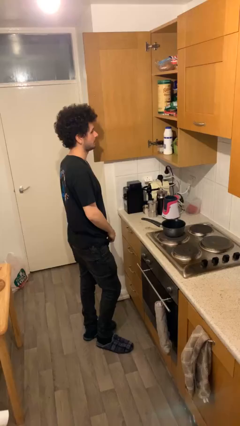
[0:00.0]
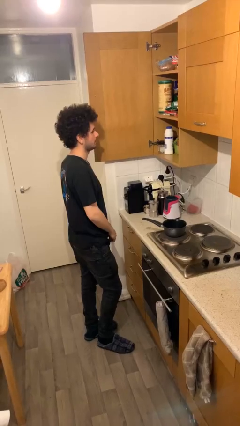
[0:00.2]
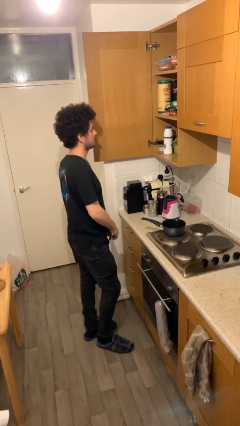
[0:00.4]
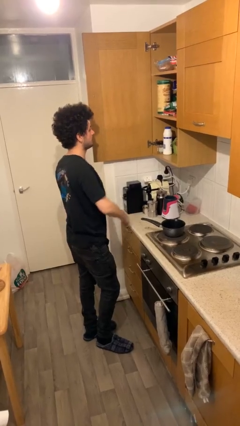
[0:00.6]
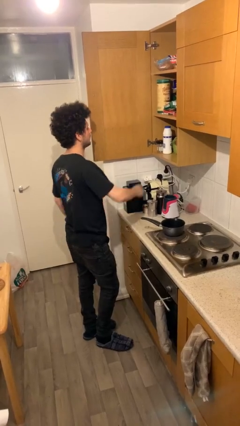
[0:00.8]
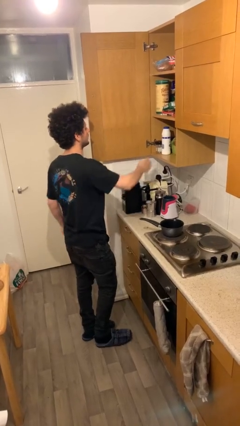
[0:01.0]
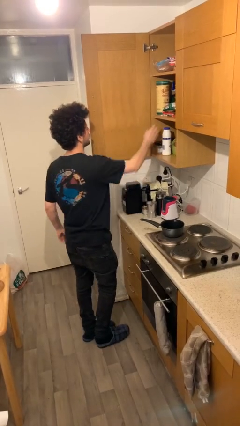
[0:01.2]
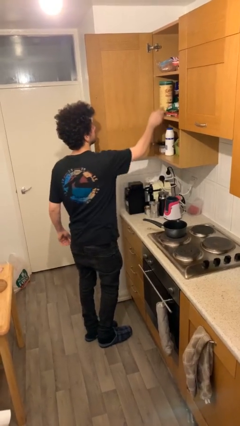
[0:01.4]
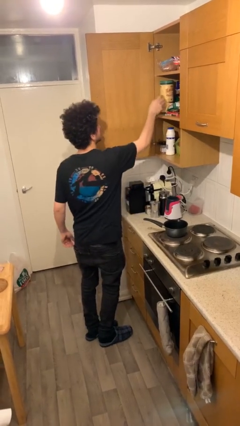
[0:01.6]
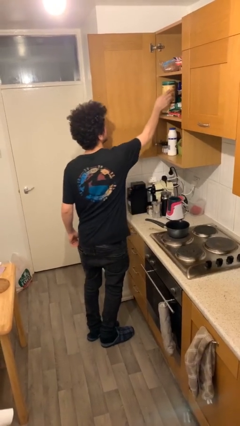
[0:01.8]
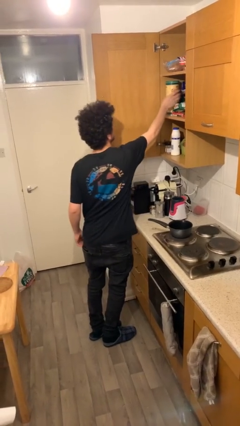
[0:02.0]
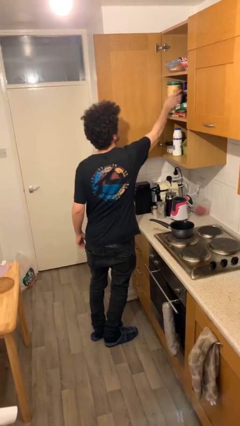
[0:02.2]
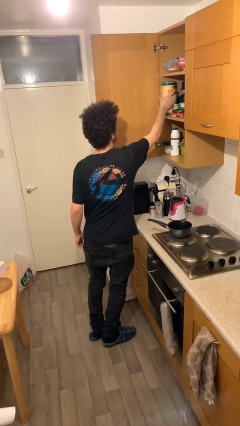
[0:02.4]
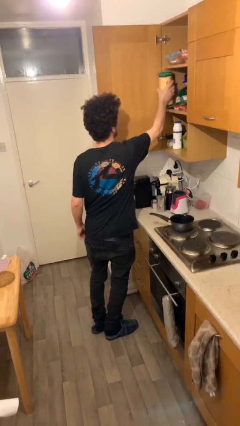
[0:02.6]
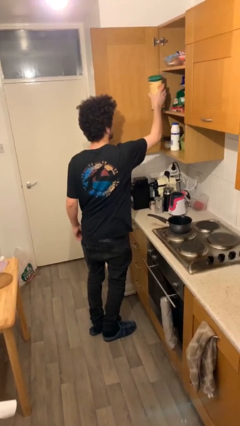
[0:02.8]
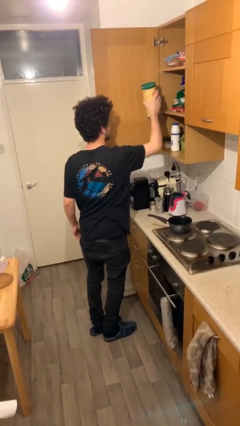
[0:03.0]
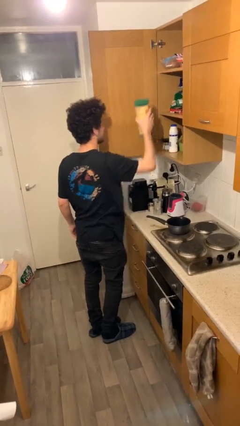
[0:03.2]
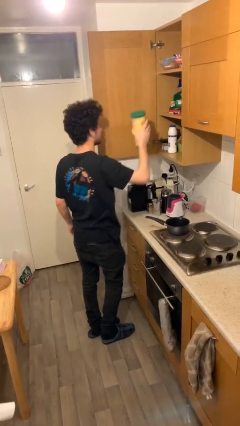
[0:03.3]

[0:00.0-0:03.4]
person picks up object from shelf

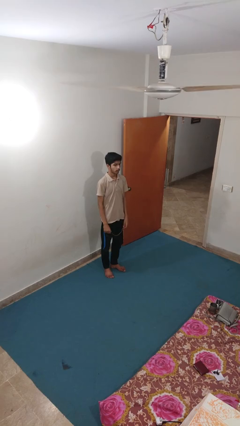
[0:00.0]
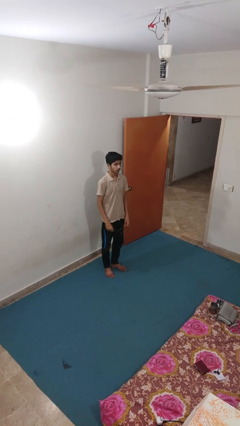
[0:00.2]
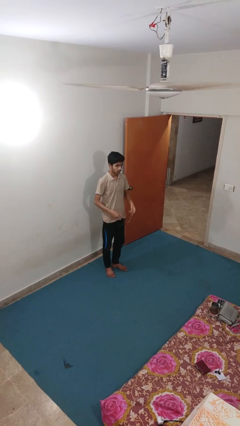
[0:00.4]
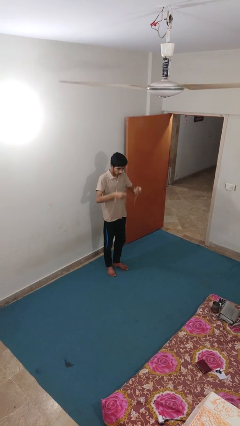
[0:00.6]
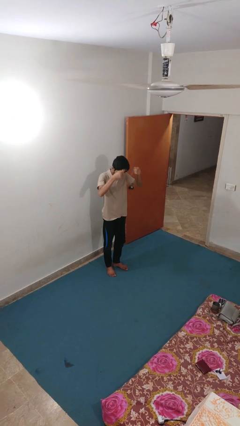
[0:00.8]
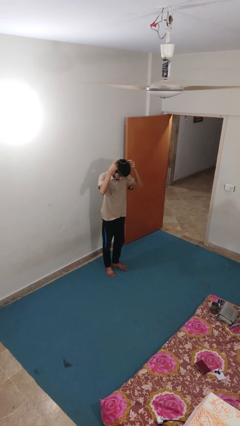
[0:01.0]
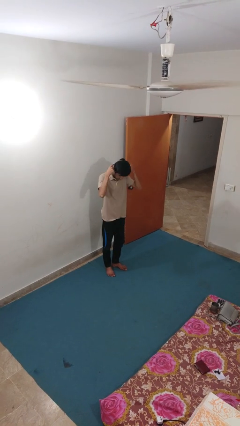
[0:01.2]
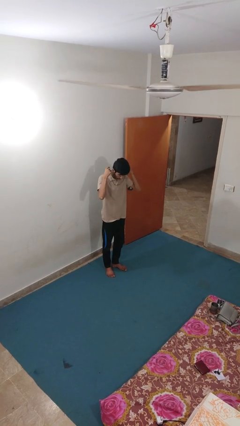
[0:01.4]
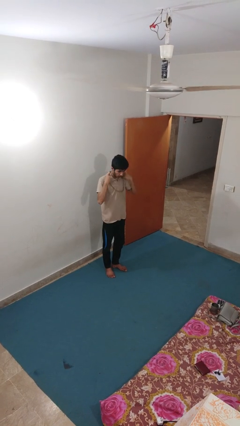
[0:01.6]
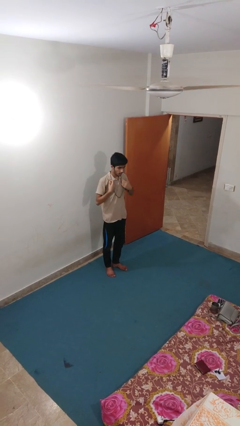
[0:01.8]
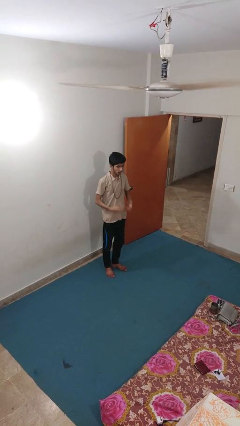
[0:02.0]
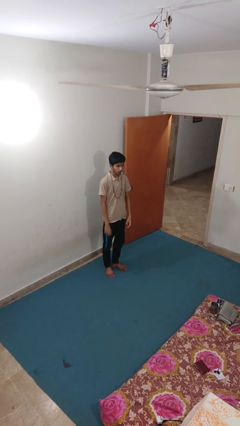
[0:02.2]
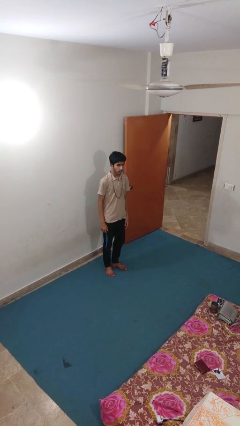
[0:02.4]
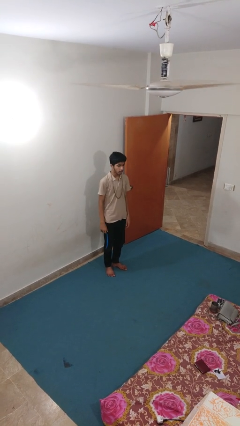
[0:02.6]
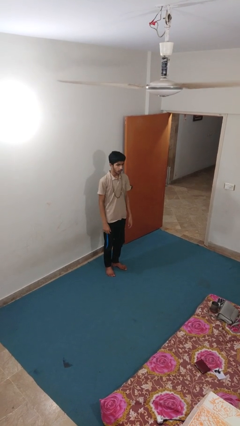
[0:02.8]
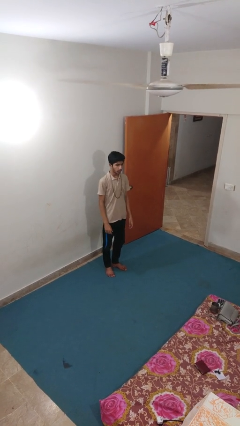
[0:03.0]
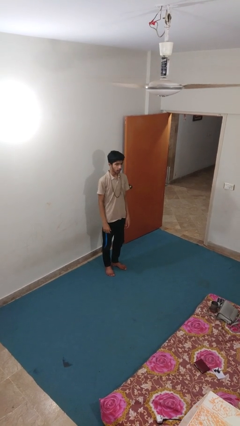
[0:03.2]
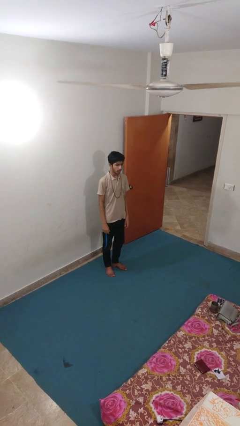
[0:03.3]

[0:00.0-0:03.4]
person puts on necklace

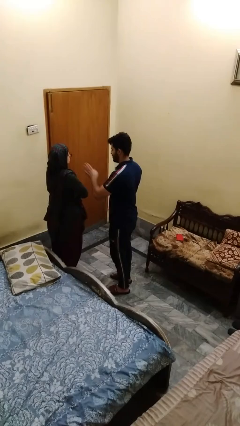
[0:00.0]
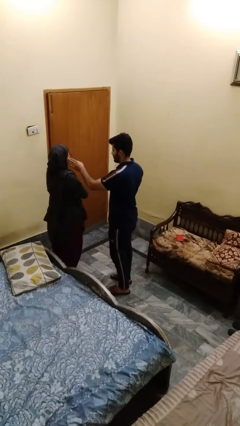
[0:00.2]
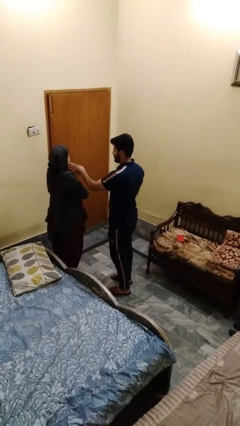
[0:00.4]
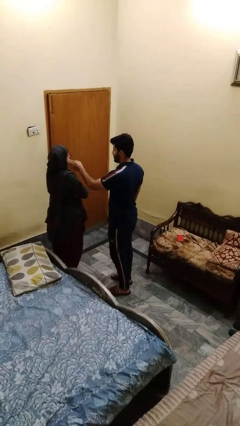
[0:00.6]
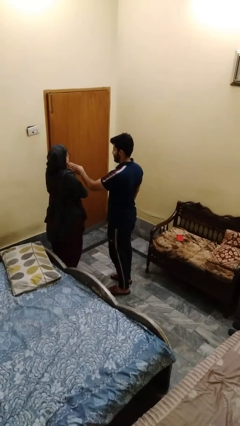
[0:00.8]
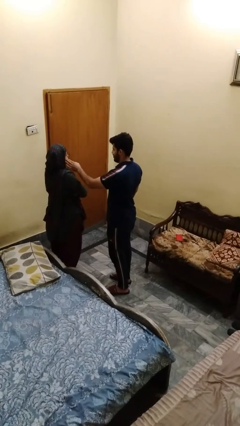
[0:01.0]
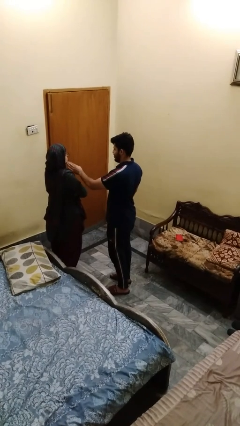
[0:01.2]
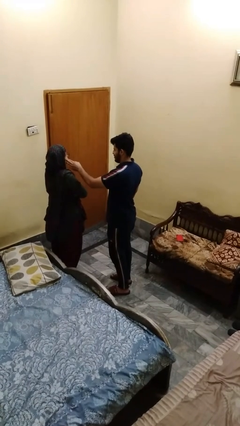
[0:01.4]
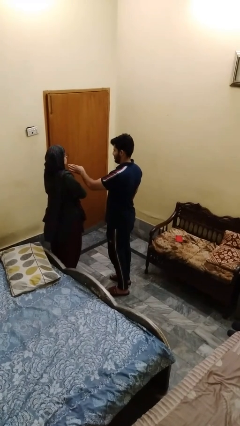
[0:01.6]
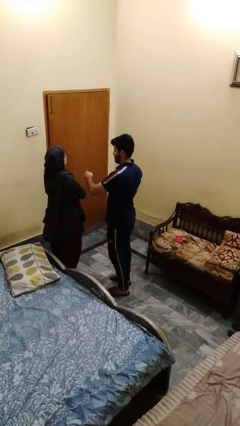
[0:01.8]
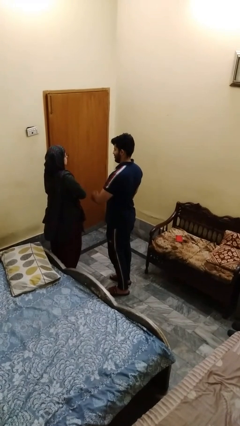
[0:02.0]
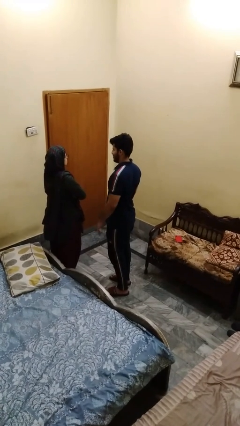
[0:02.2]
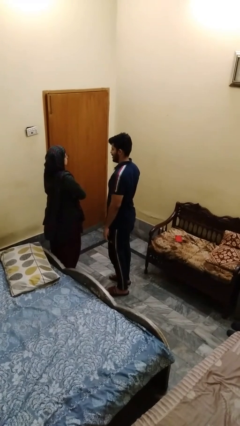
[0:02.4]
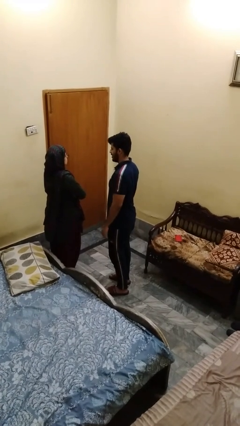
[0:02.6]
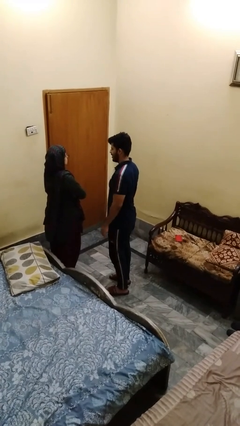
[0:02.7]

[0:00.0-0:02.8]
person touches face of person

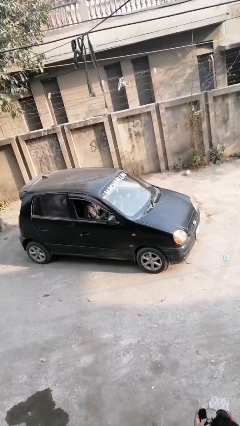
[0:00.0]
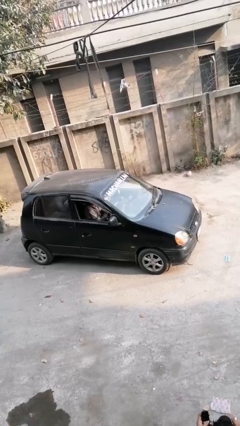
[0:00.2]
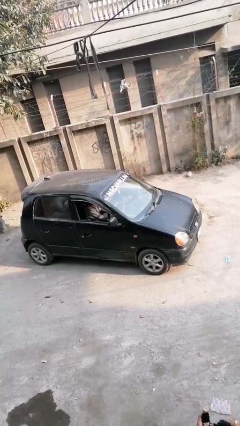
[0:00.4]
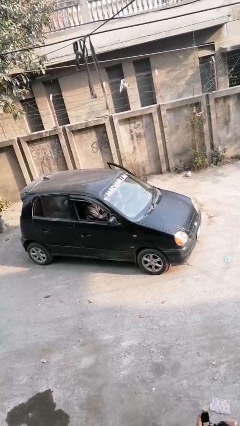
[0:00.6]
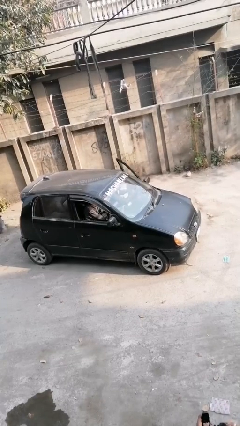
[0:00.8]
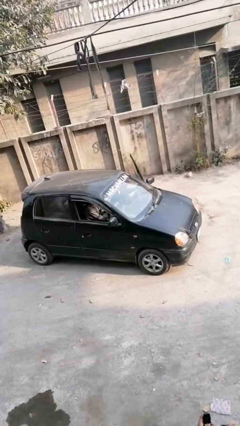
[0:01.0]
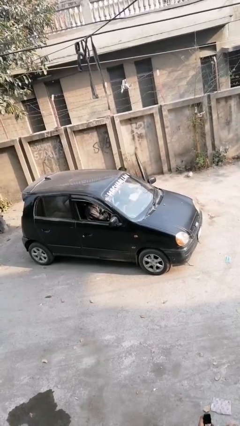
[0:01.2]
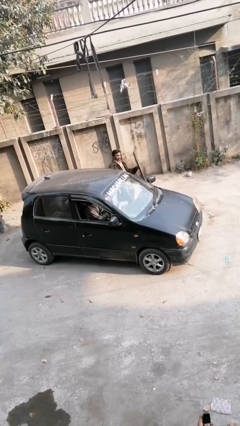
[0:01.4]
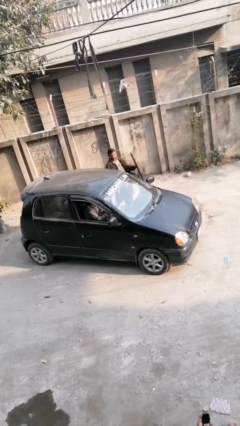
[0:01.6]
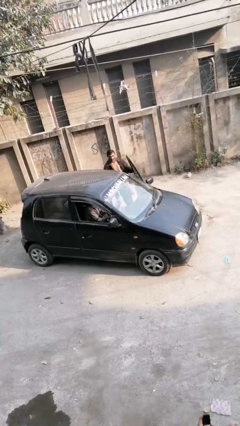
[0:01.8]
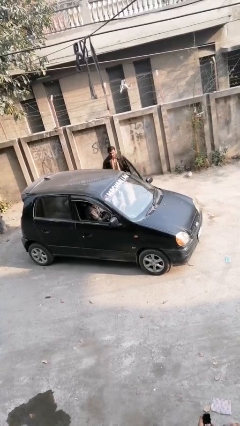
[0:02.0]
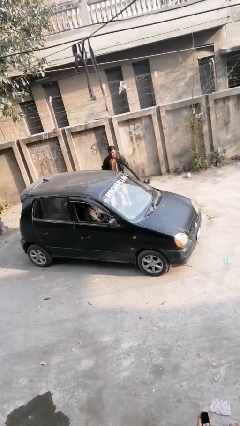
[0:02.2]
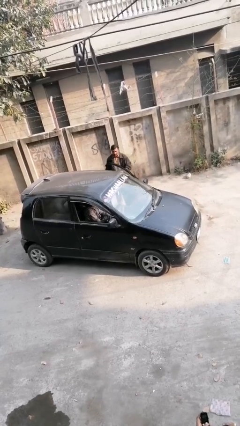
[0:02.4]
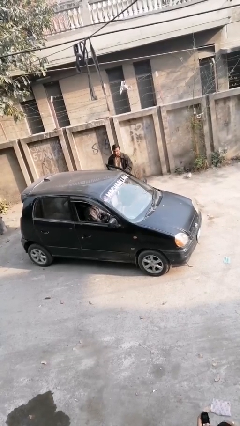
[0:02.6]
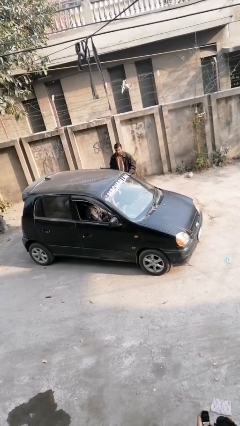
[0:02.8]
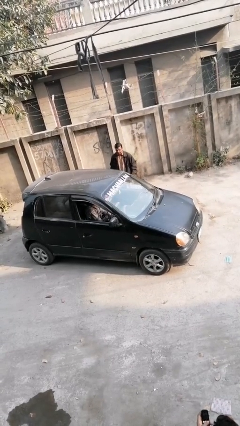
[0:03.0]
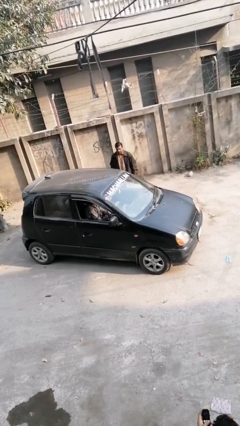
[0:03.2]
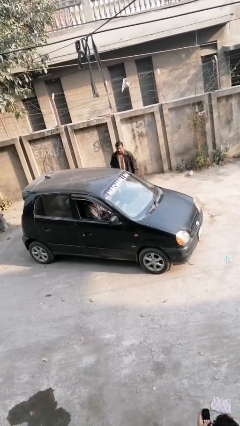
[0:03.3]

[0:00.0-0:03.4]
car drops off person

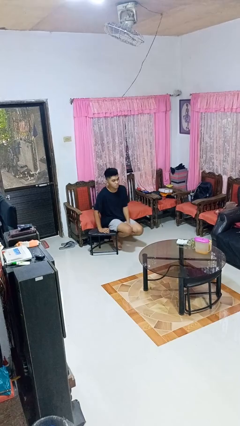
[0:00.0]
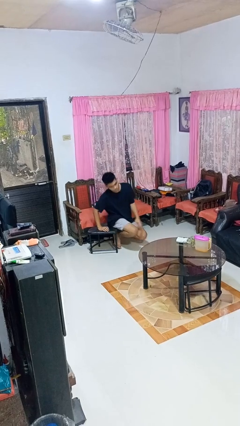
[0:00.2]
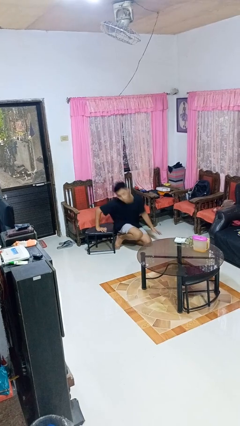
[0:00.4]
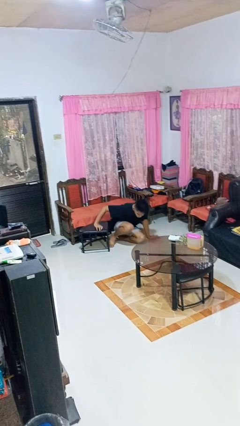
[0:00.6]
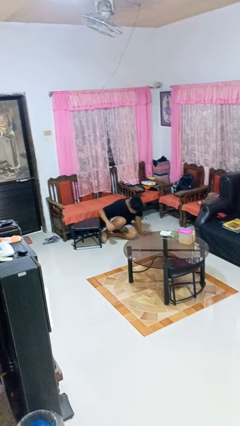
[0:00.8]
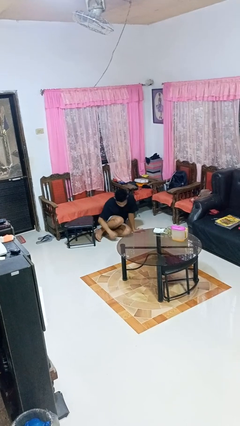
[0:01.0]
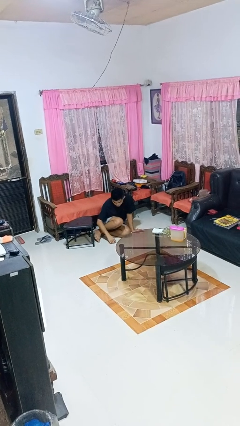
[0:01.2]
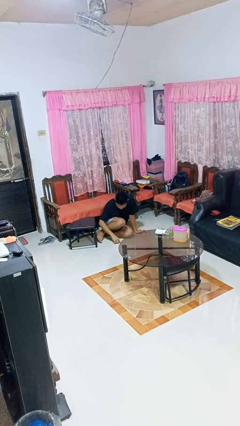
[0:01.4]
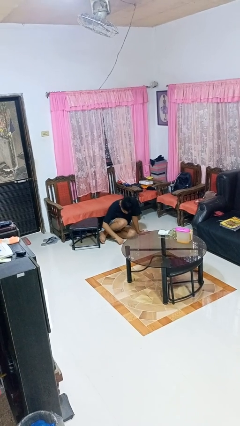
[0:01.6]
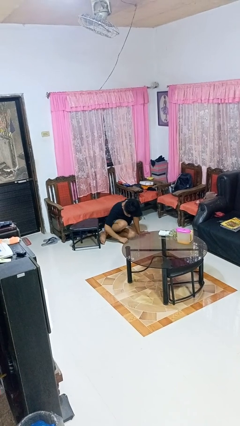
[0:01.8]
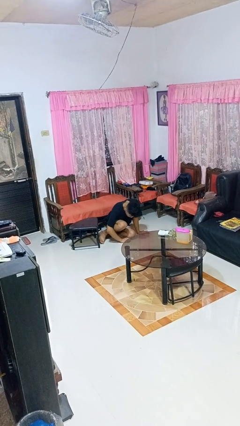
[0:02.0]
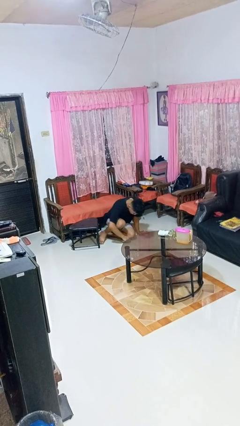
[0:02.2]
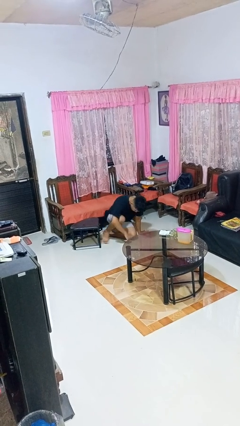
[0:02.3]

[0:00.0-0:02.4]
person falls from chair

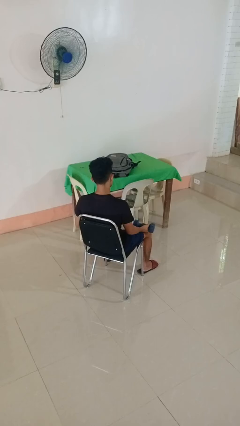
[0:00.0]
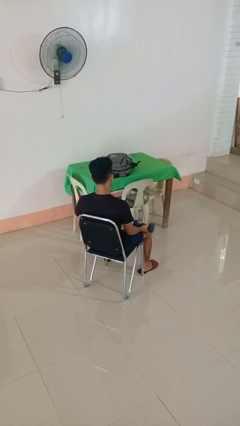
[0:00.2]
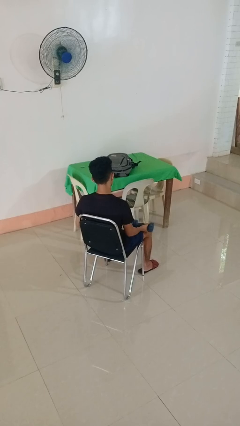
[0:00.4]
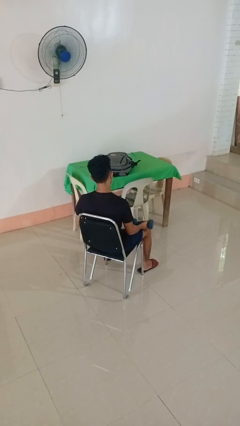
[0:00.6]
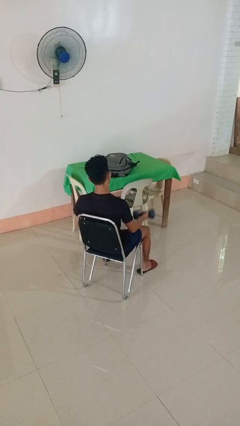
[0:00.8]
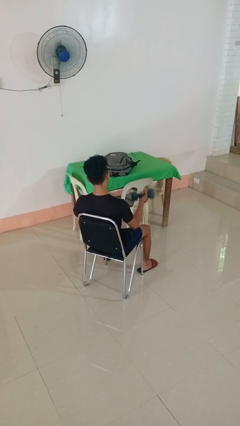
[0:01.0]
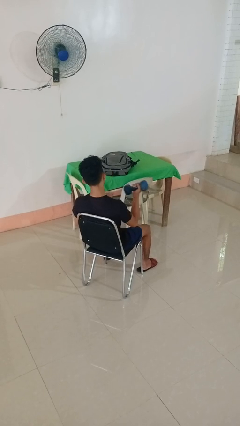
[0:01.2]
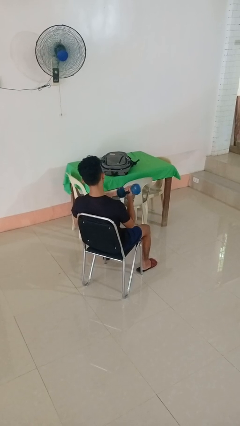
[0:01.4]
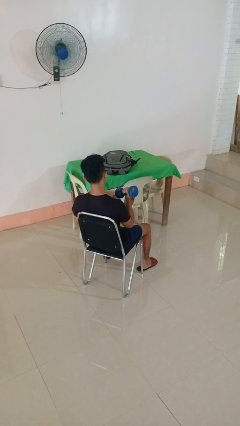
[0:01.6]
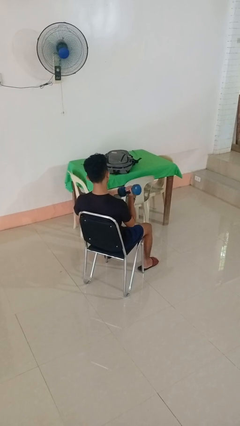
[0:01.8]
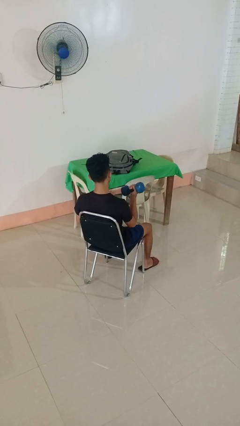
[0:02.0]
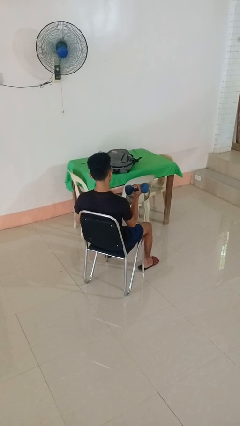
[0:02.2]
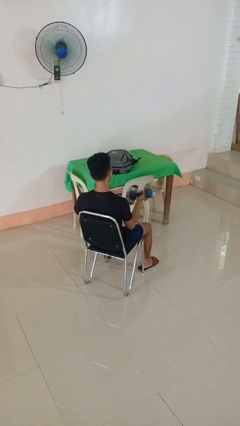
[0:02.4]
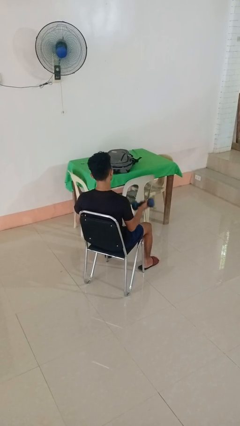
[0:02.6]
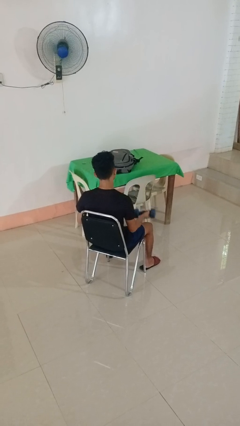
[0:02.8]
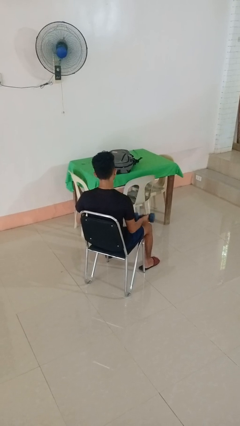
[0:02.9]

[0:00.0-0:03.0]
person lifts dumbbells
